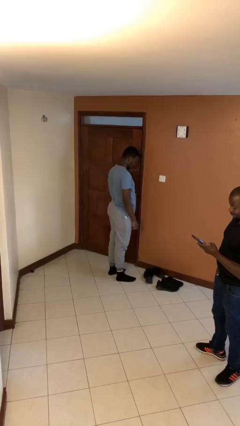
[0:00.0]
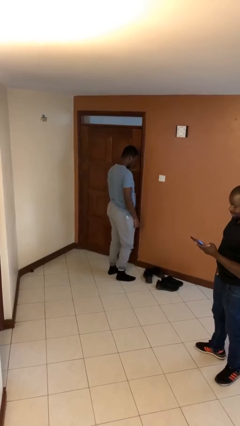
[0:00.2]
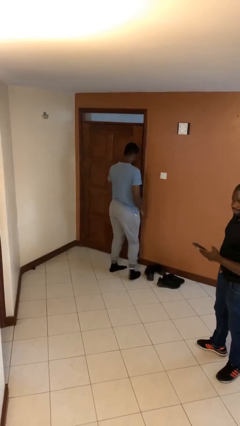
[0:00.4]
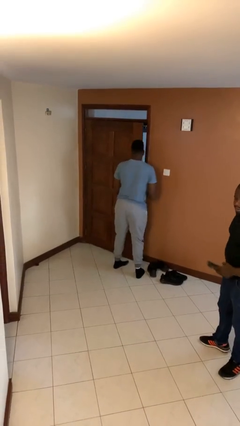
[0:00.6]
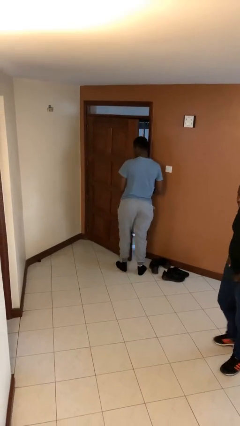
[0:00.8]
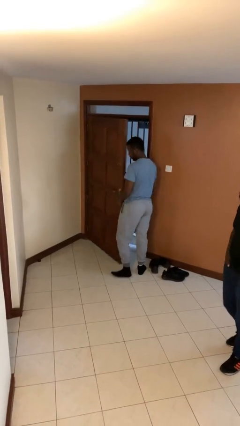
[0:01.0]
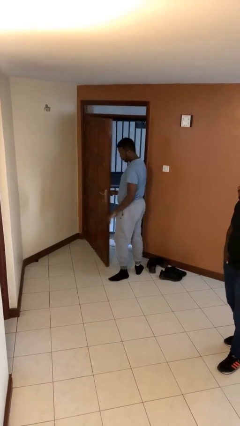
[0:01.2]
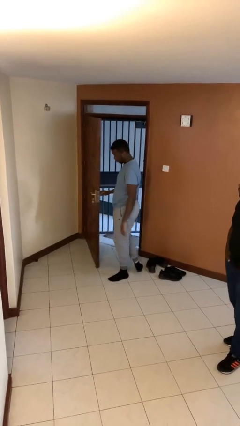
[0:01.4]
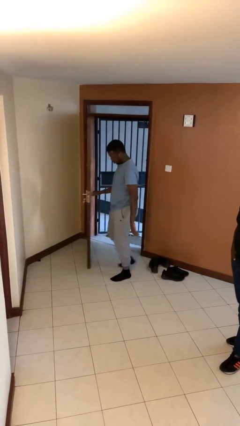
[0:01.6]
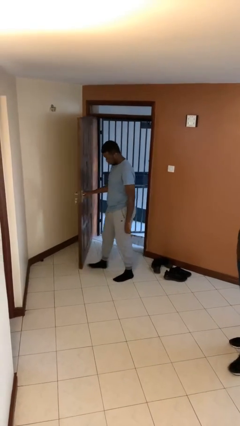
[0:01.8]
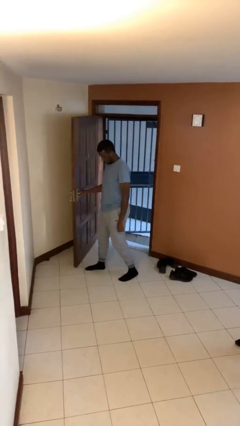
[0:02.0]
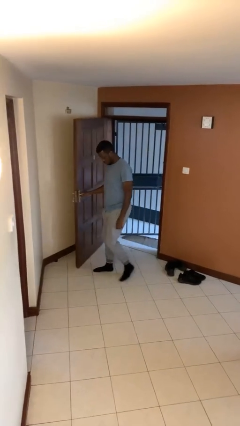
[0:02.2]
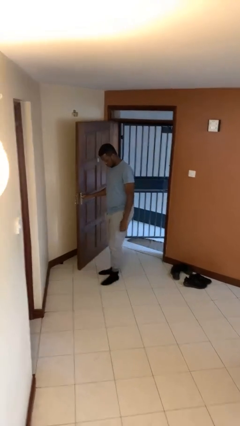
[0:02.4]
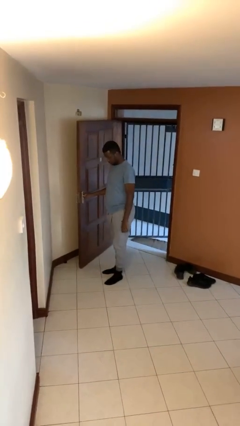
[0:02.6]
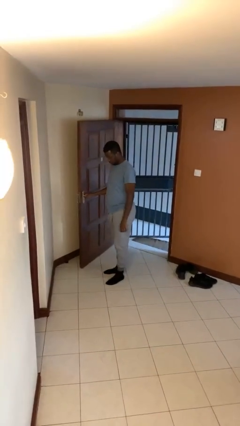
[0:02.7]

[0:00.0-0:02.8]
person opens facility door

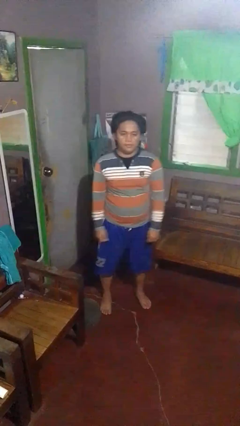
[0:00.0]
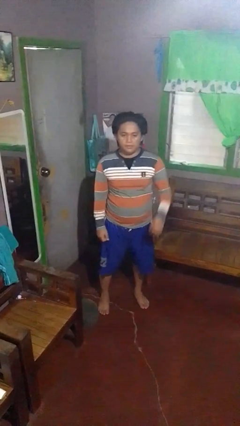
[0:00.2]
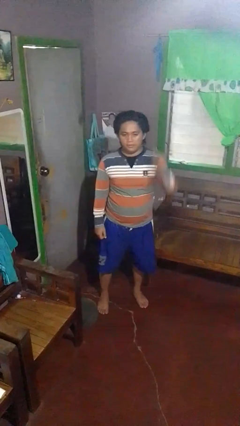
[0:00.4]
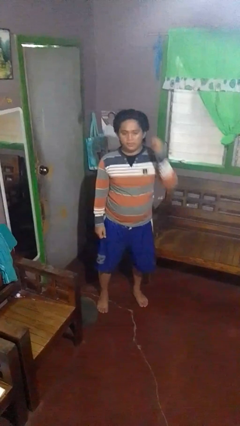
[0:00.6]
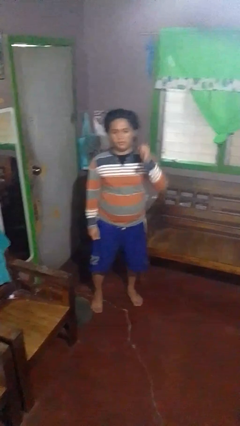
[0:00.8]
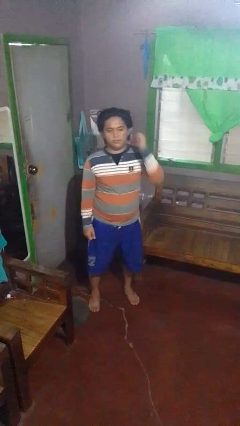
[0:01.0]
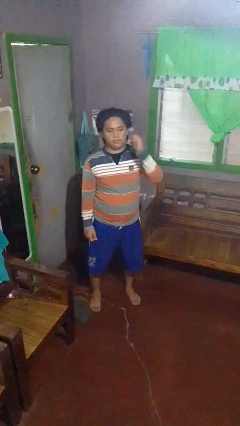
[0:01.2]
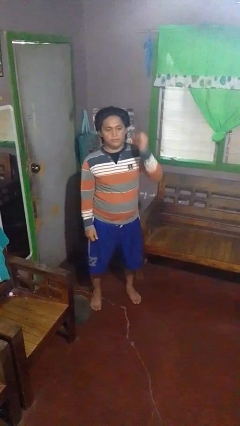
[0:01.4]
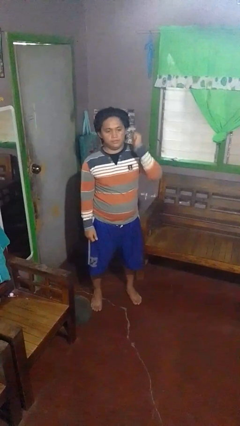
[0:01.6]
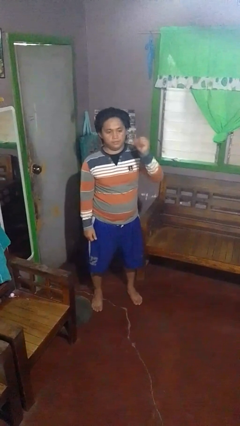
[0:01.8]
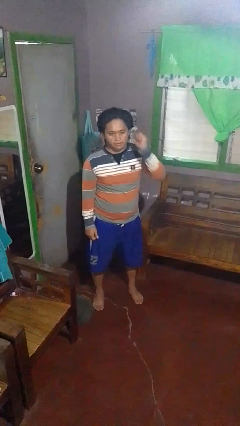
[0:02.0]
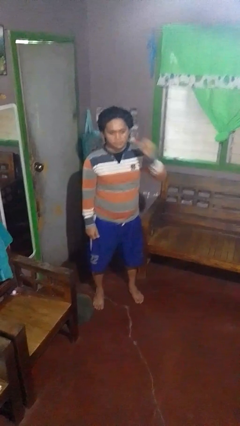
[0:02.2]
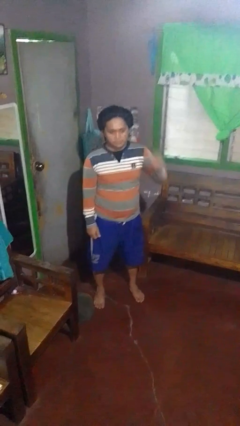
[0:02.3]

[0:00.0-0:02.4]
person gestures behind me

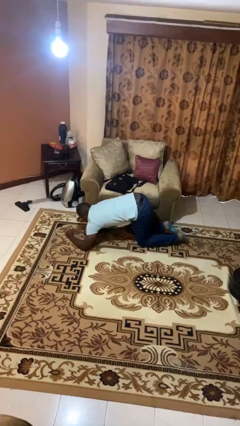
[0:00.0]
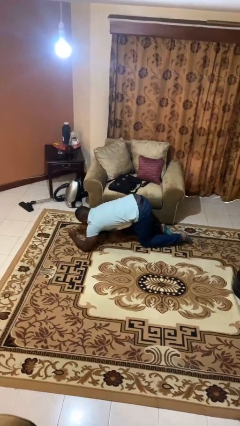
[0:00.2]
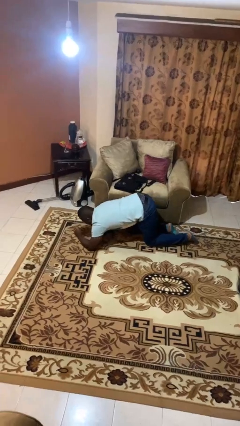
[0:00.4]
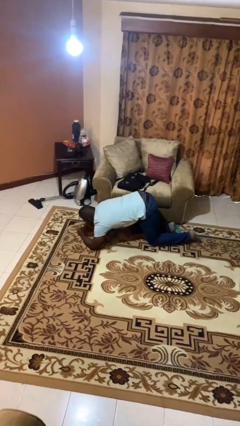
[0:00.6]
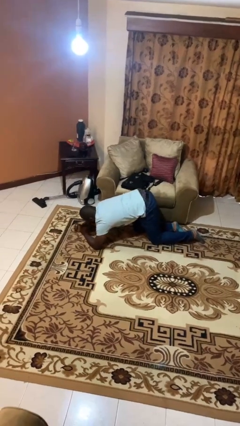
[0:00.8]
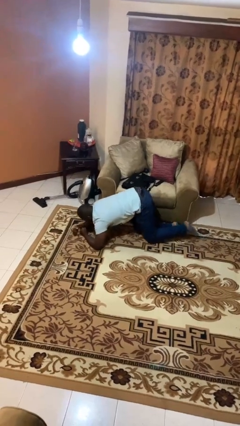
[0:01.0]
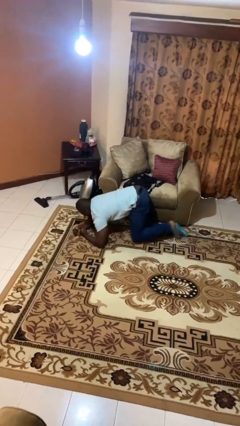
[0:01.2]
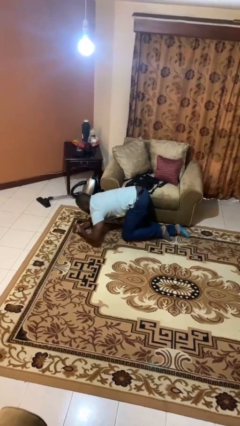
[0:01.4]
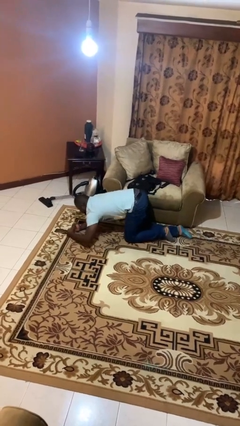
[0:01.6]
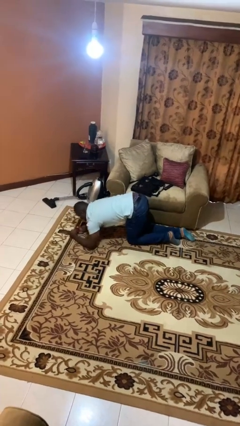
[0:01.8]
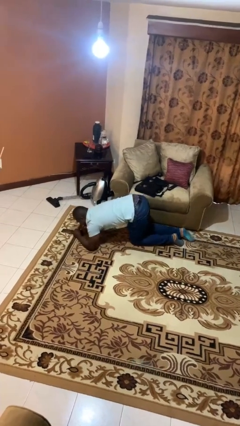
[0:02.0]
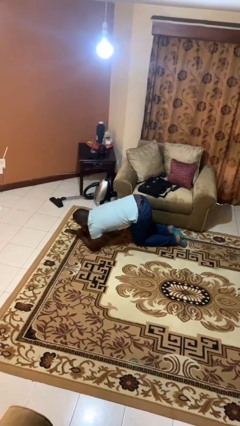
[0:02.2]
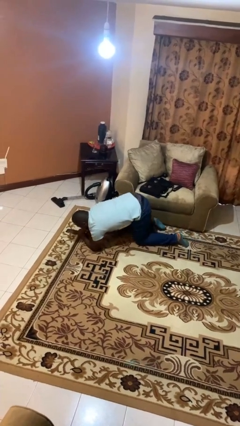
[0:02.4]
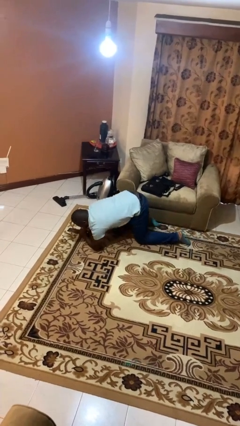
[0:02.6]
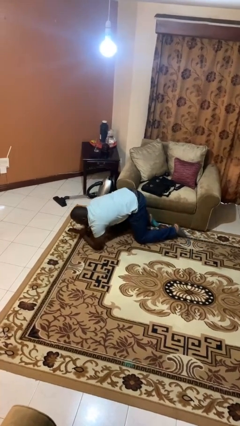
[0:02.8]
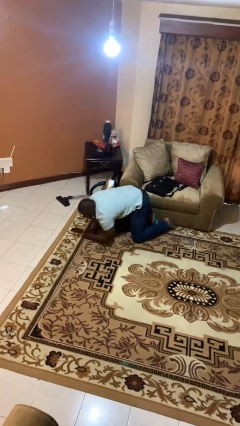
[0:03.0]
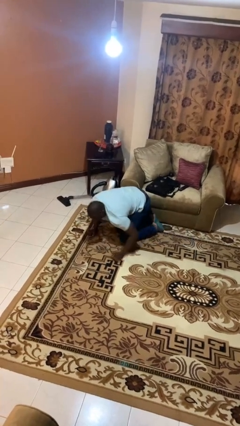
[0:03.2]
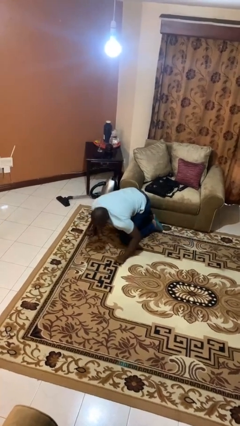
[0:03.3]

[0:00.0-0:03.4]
person crawls

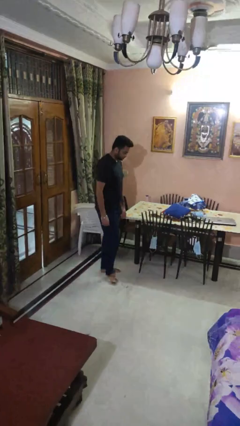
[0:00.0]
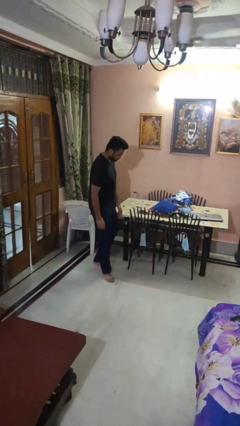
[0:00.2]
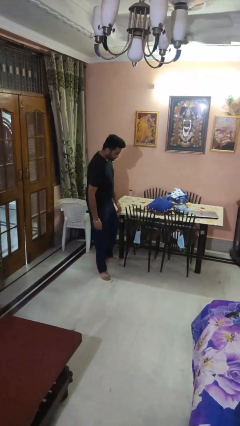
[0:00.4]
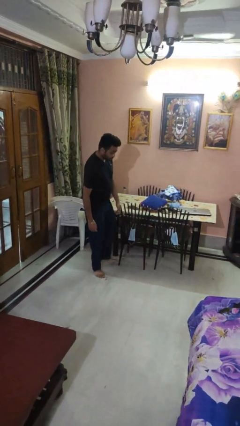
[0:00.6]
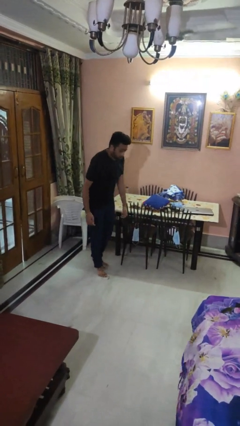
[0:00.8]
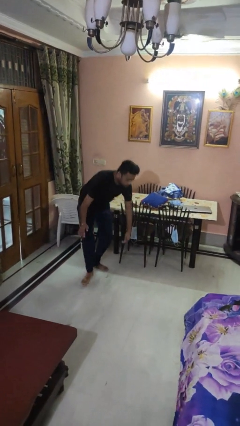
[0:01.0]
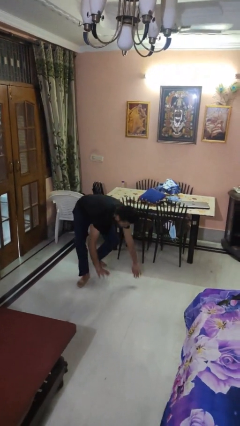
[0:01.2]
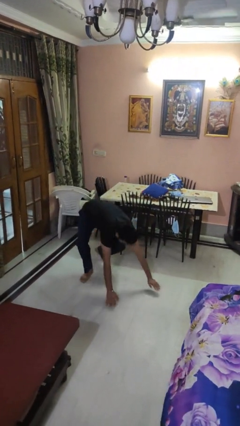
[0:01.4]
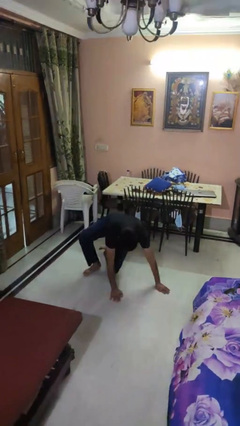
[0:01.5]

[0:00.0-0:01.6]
person trips on object on floor

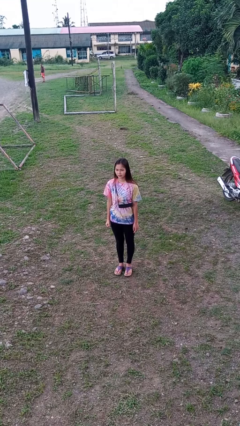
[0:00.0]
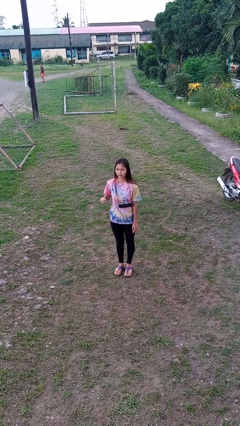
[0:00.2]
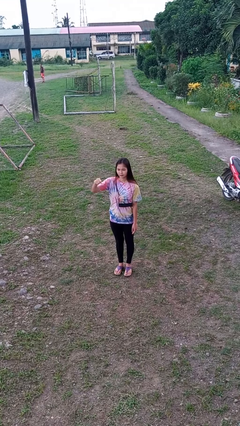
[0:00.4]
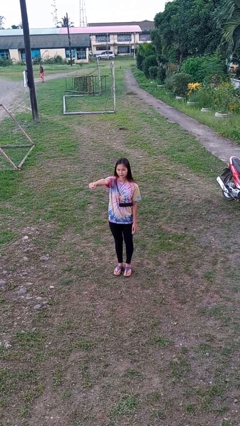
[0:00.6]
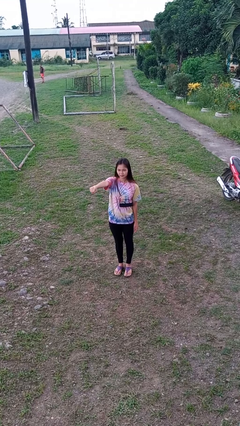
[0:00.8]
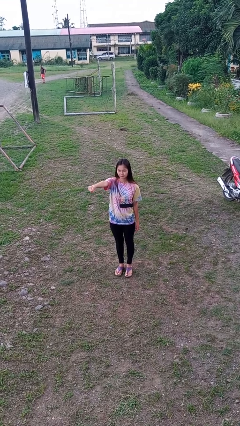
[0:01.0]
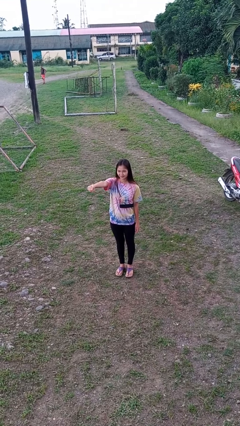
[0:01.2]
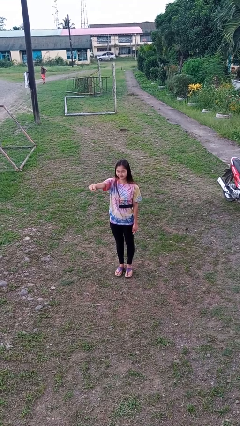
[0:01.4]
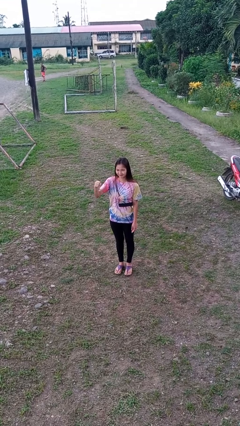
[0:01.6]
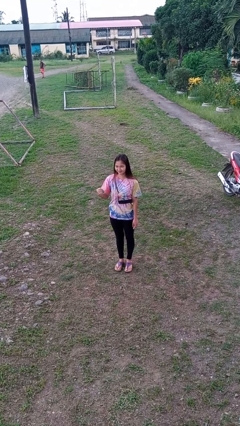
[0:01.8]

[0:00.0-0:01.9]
person punches

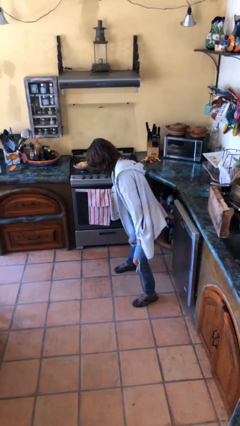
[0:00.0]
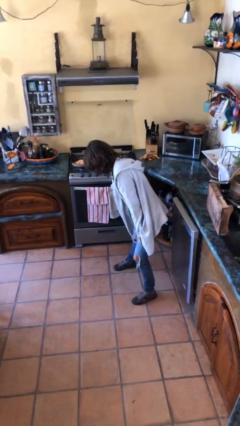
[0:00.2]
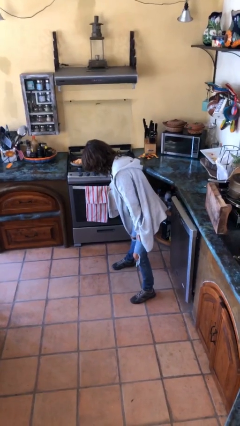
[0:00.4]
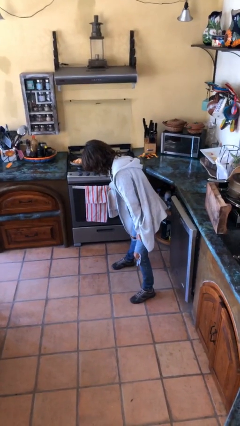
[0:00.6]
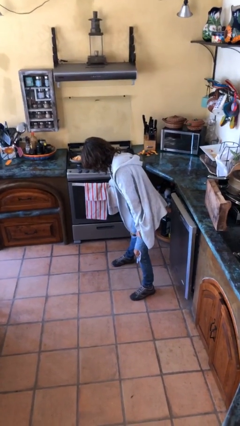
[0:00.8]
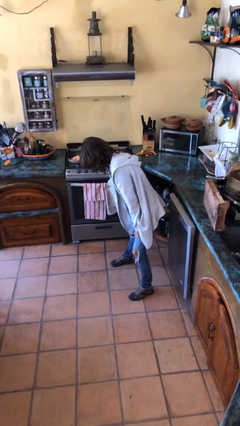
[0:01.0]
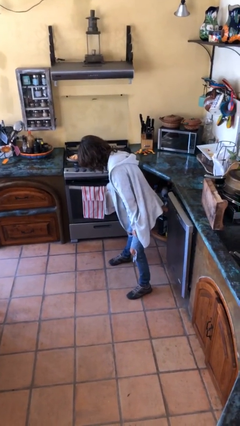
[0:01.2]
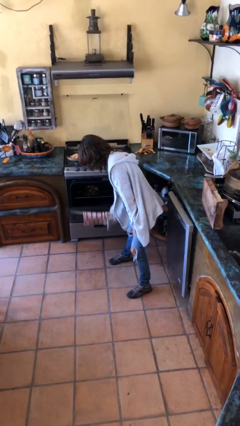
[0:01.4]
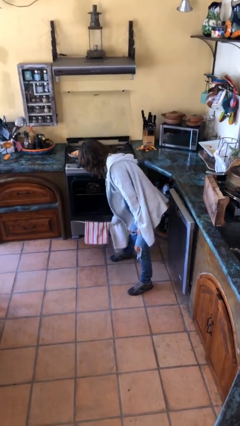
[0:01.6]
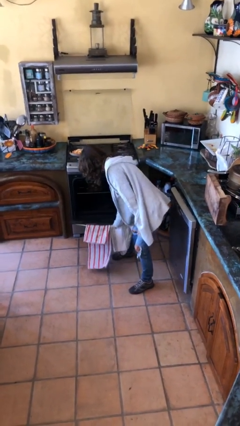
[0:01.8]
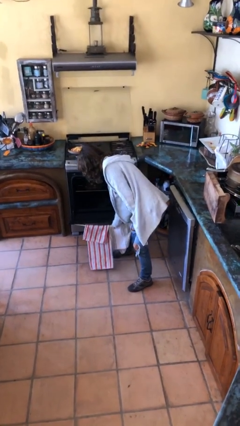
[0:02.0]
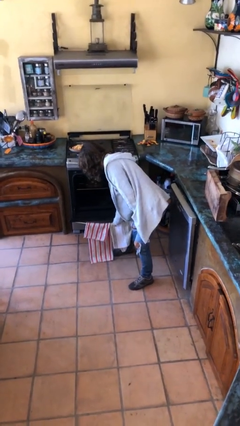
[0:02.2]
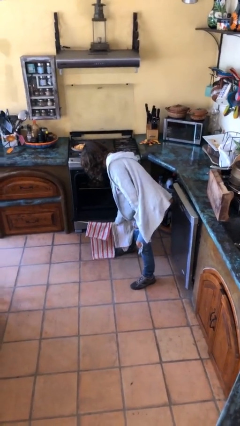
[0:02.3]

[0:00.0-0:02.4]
person opens oven door

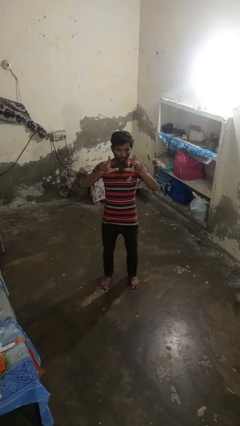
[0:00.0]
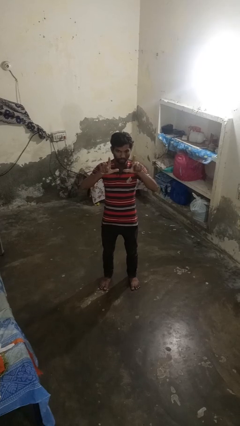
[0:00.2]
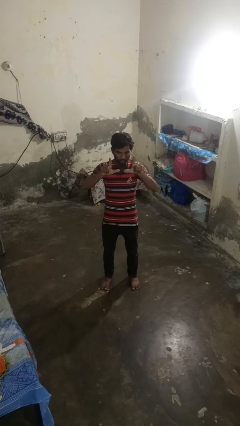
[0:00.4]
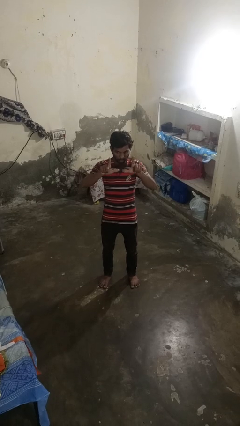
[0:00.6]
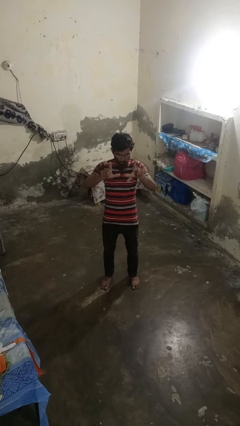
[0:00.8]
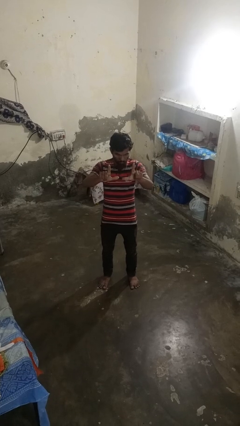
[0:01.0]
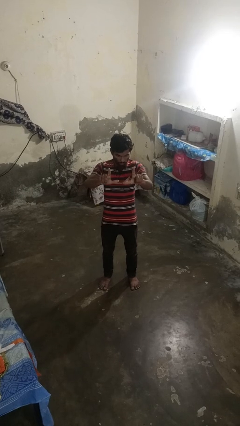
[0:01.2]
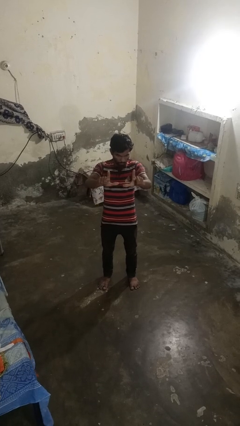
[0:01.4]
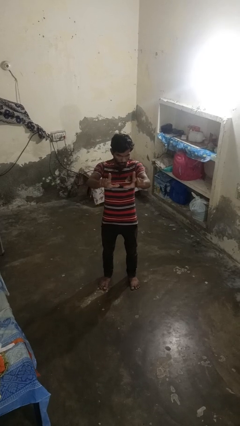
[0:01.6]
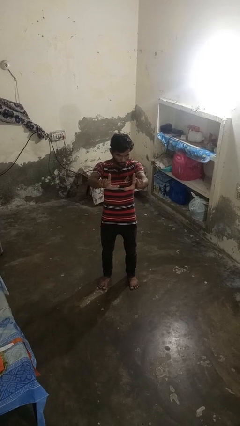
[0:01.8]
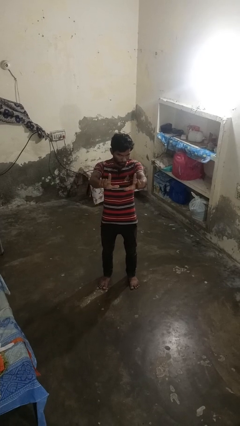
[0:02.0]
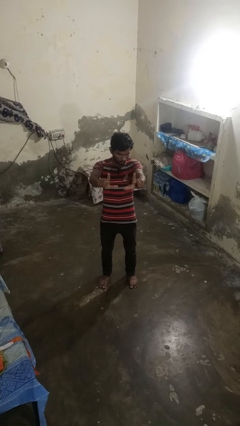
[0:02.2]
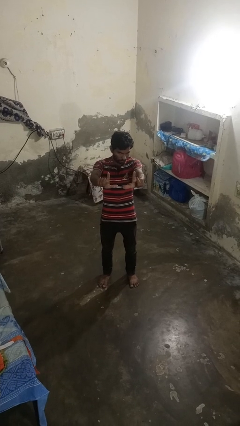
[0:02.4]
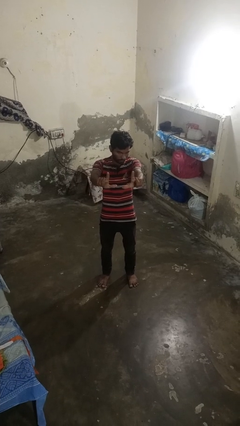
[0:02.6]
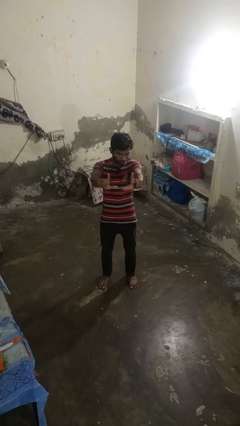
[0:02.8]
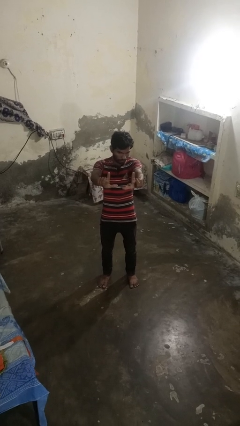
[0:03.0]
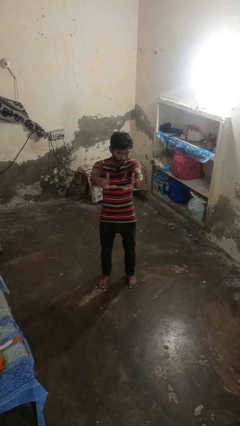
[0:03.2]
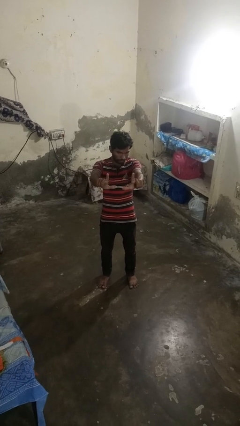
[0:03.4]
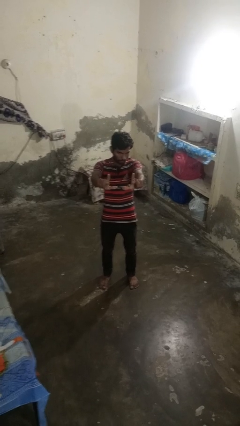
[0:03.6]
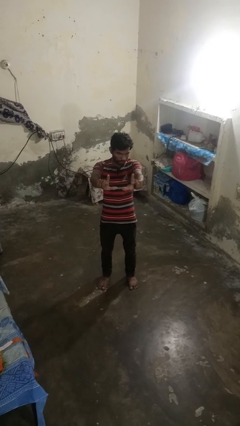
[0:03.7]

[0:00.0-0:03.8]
person gestures zoom out
